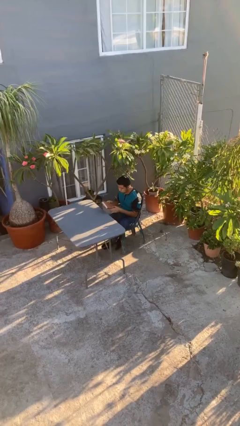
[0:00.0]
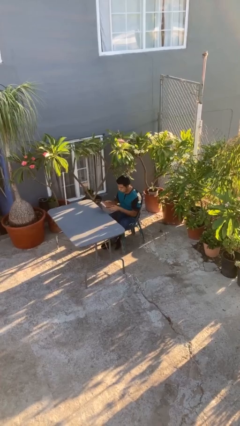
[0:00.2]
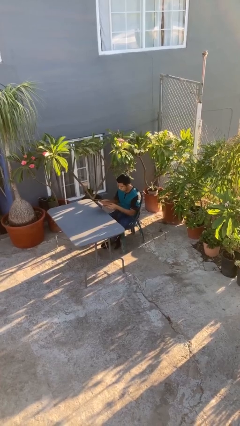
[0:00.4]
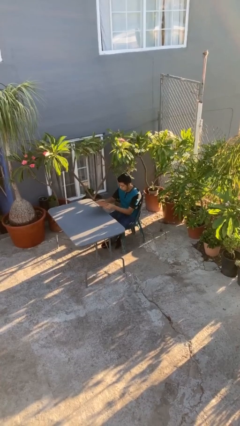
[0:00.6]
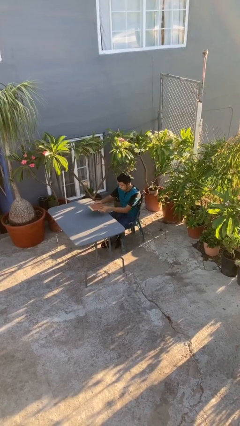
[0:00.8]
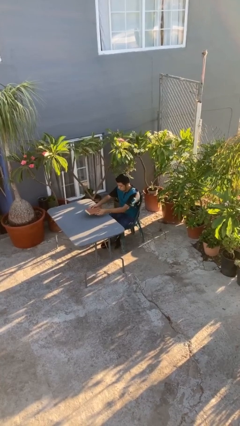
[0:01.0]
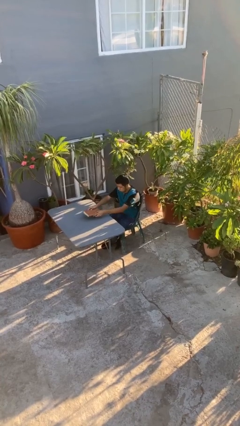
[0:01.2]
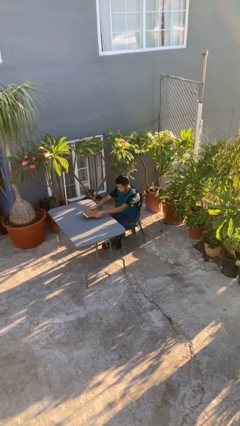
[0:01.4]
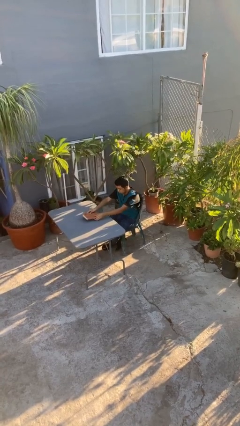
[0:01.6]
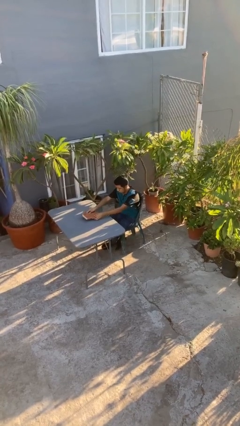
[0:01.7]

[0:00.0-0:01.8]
person puts down object on table

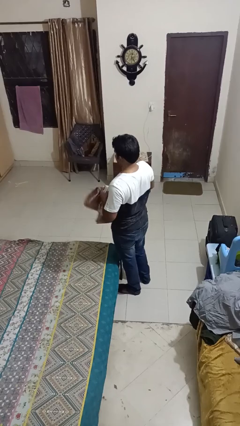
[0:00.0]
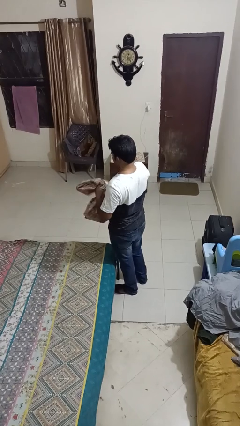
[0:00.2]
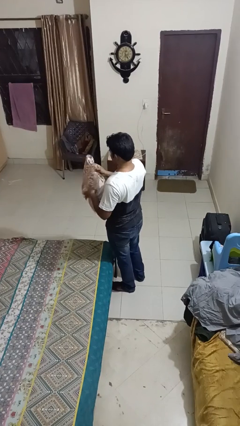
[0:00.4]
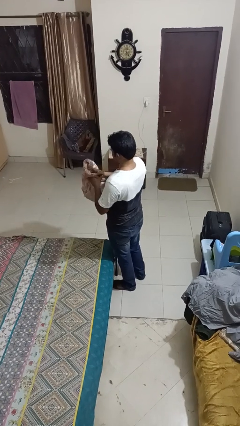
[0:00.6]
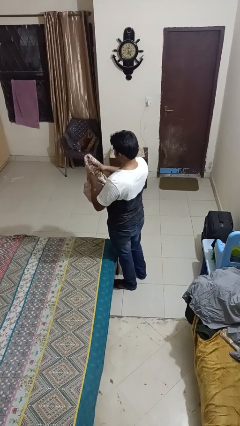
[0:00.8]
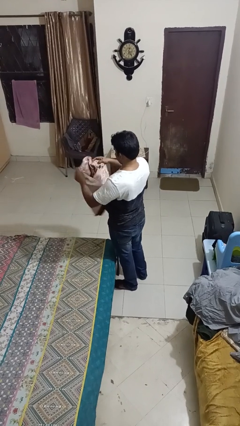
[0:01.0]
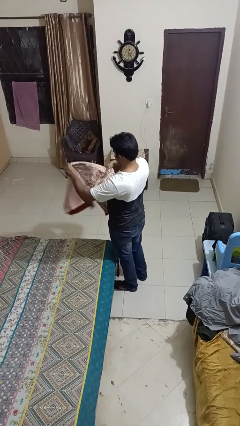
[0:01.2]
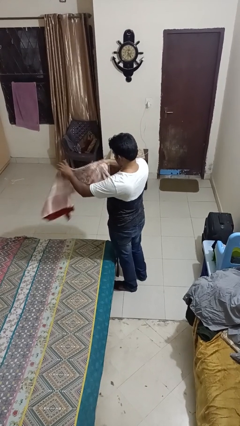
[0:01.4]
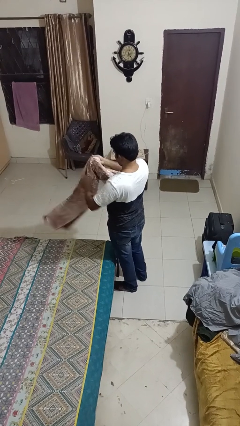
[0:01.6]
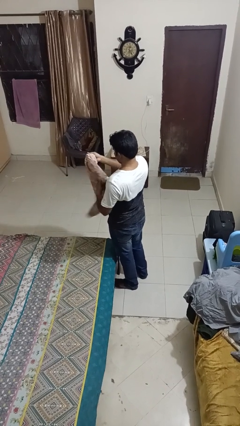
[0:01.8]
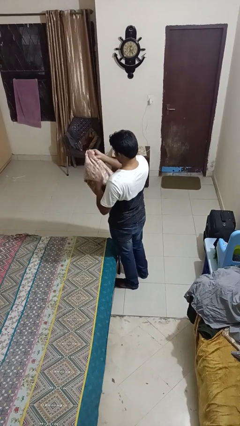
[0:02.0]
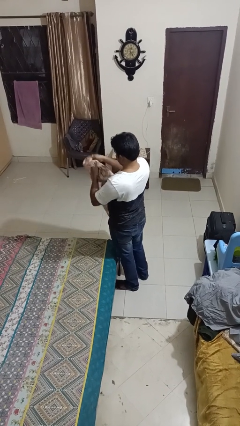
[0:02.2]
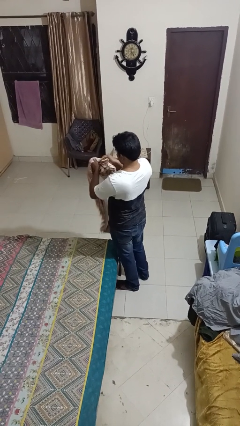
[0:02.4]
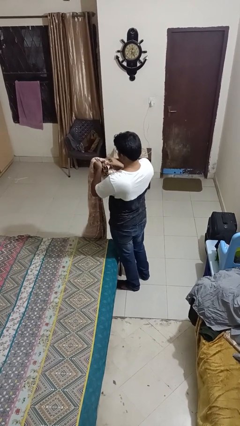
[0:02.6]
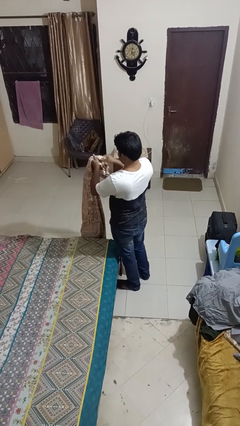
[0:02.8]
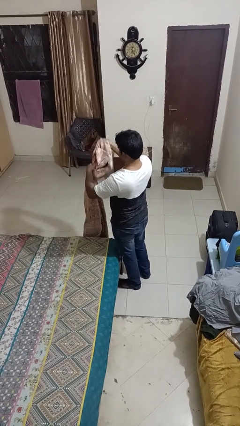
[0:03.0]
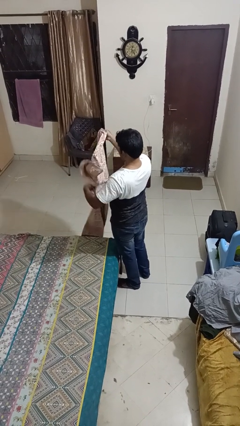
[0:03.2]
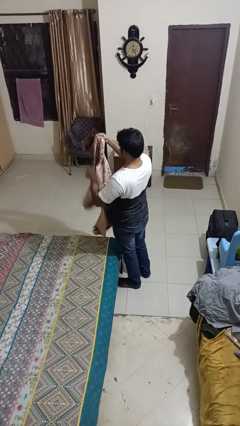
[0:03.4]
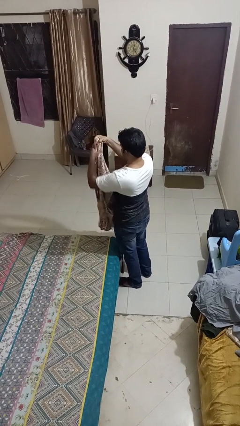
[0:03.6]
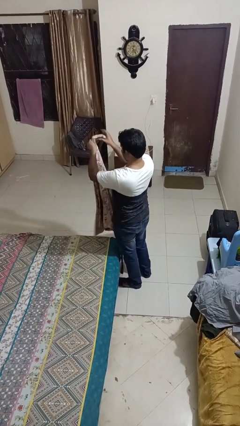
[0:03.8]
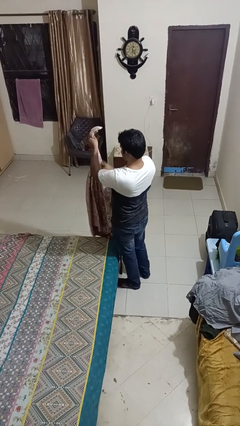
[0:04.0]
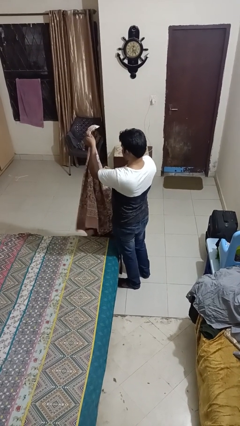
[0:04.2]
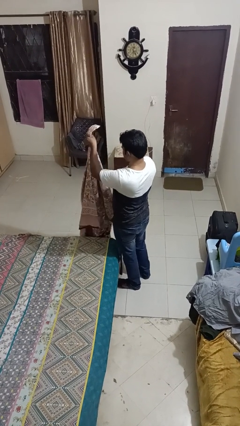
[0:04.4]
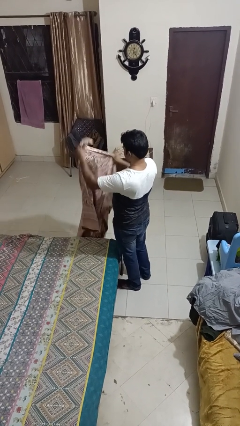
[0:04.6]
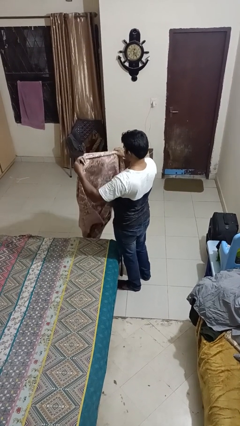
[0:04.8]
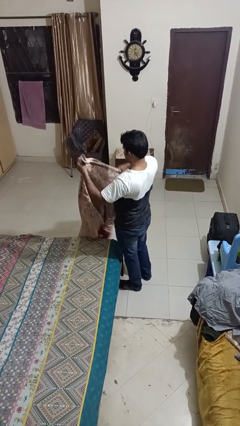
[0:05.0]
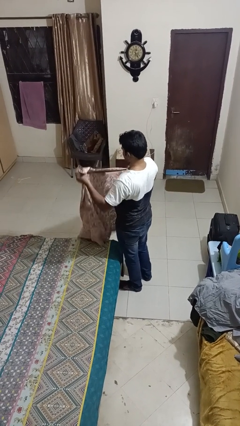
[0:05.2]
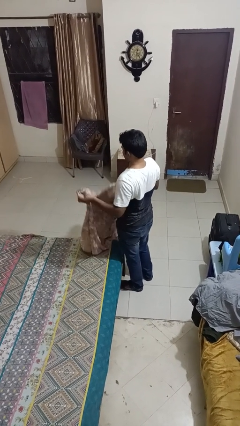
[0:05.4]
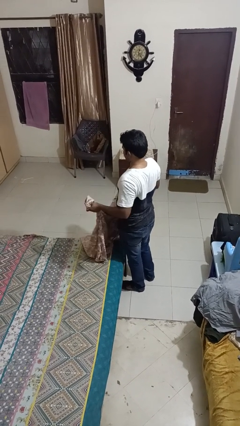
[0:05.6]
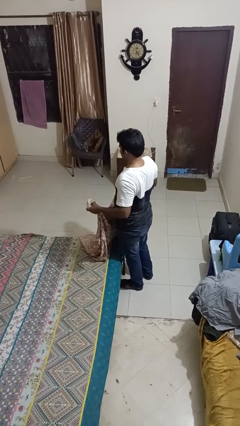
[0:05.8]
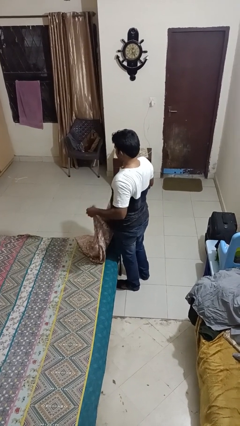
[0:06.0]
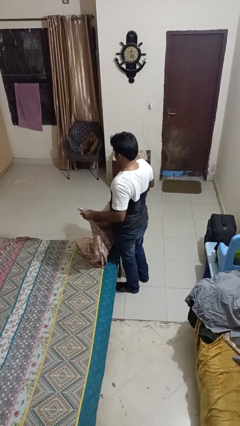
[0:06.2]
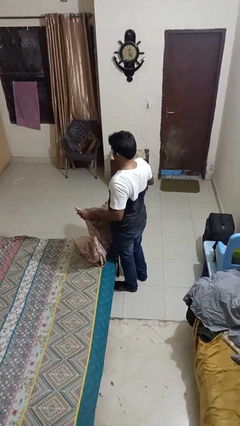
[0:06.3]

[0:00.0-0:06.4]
person unfolds blanket

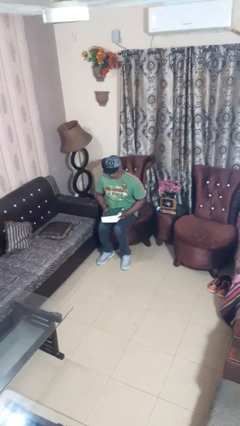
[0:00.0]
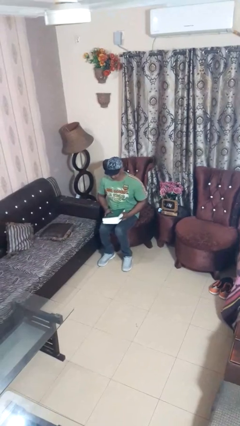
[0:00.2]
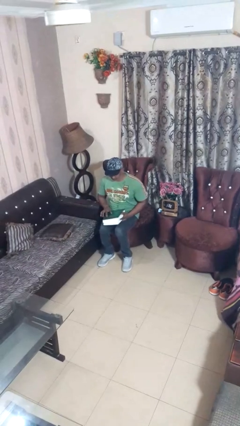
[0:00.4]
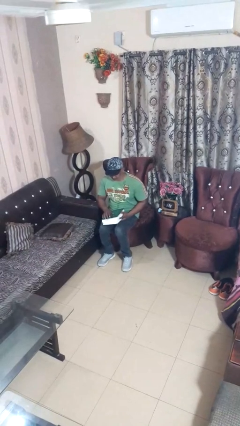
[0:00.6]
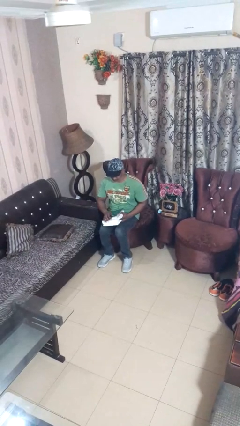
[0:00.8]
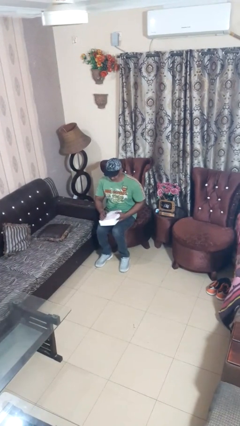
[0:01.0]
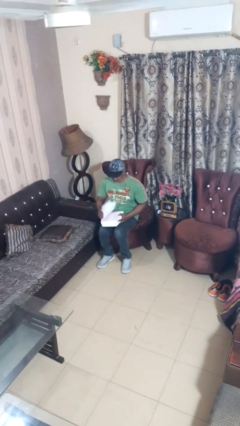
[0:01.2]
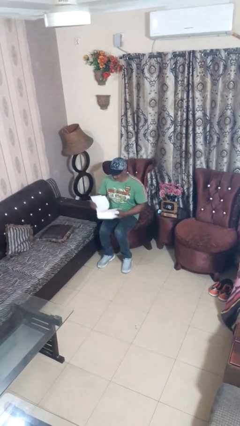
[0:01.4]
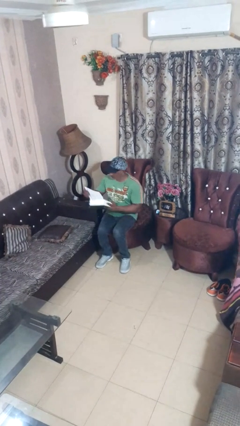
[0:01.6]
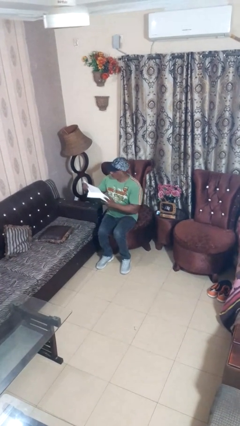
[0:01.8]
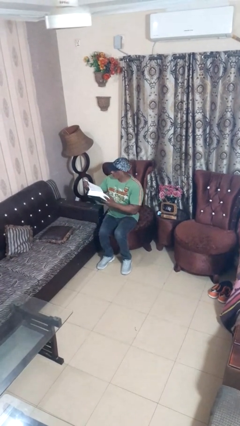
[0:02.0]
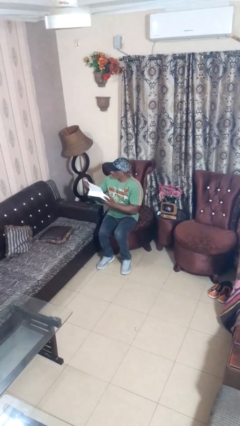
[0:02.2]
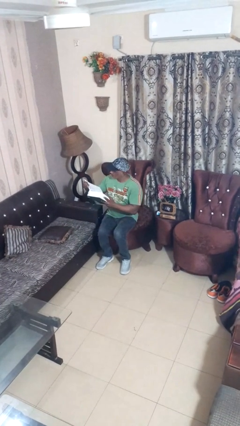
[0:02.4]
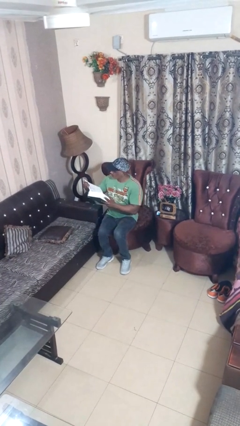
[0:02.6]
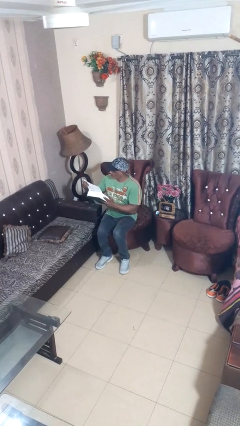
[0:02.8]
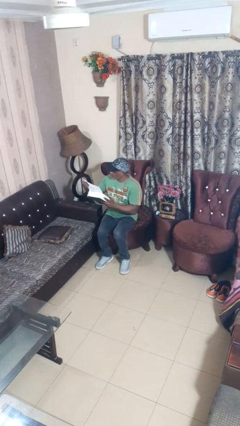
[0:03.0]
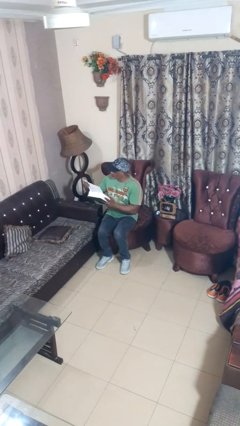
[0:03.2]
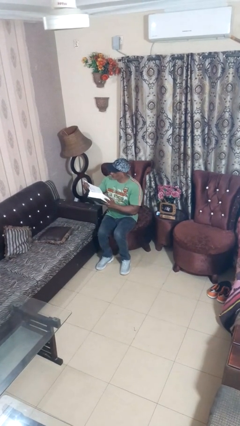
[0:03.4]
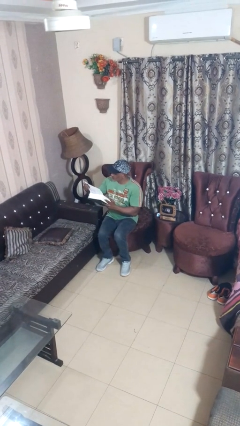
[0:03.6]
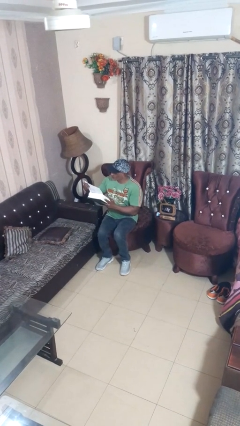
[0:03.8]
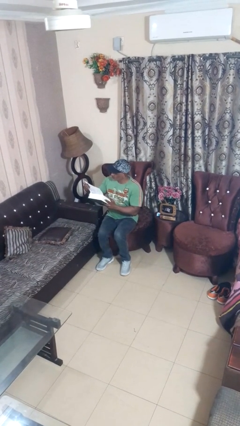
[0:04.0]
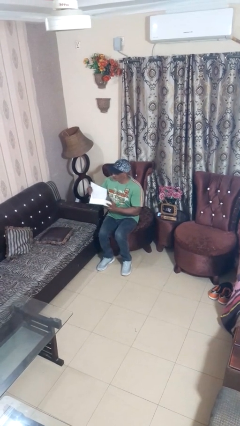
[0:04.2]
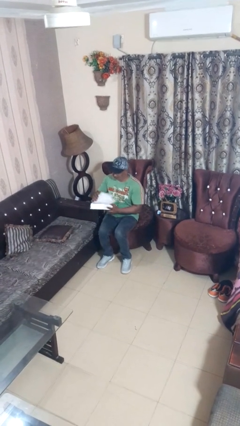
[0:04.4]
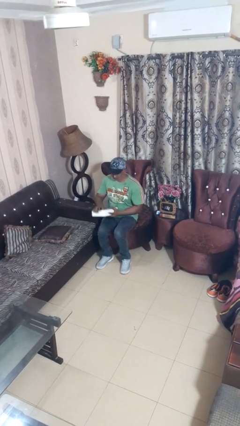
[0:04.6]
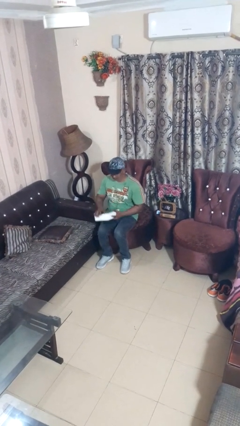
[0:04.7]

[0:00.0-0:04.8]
person reads book

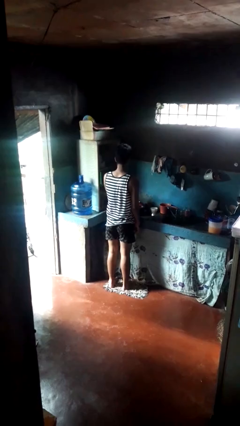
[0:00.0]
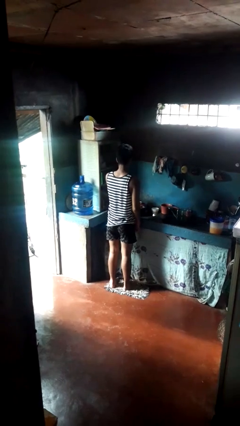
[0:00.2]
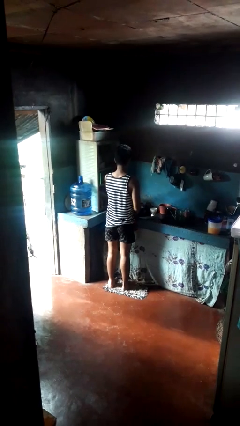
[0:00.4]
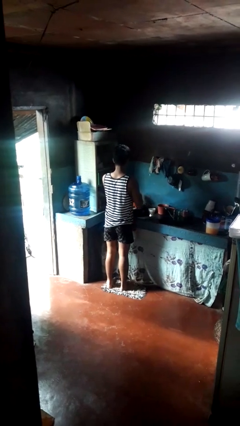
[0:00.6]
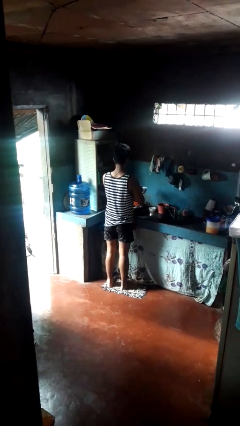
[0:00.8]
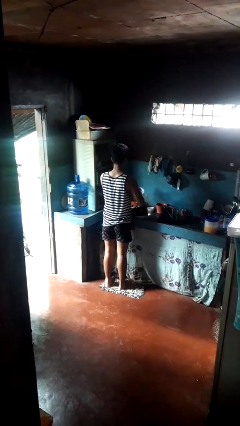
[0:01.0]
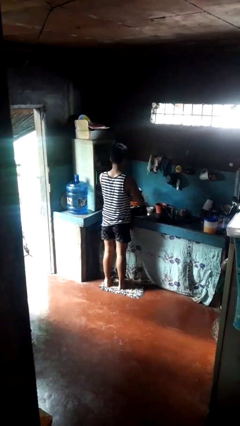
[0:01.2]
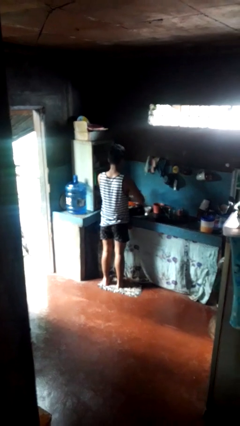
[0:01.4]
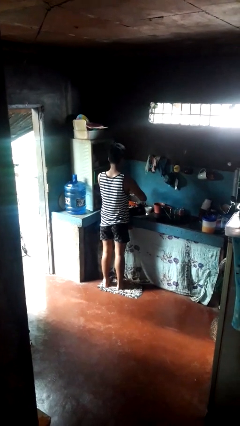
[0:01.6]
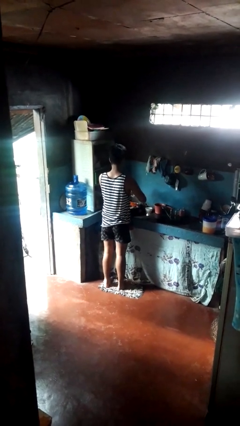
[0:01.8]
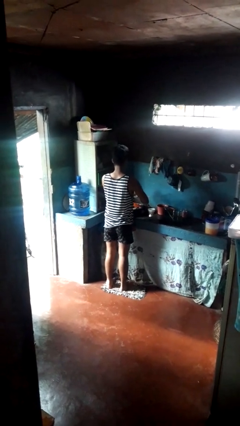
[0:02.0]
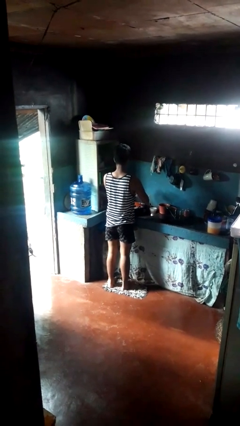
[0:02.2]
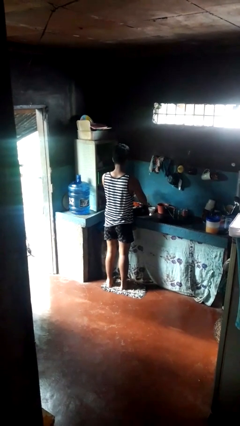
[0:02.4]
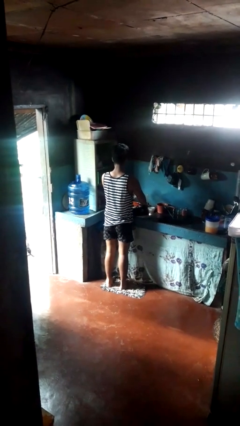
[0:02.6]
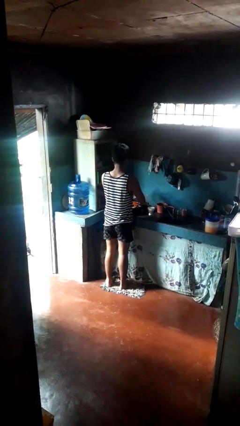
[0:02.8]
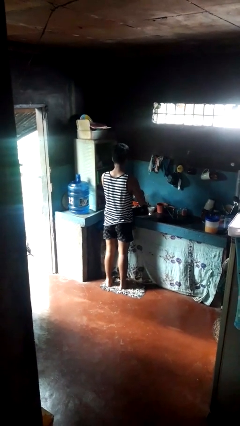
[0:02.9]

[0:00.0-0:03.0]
person washes dish

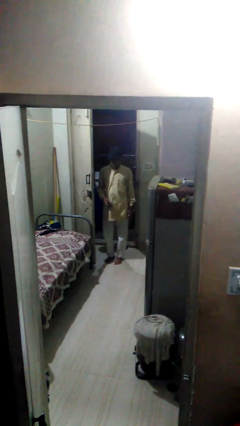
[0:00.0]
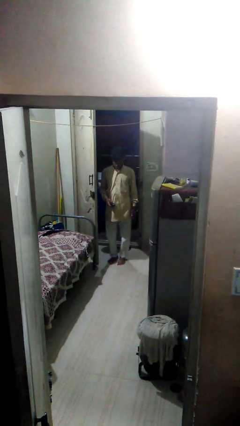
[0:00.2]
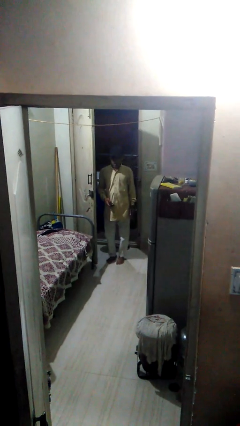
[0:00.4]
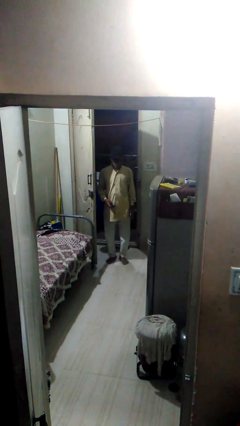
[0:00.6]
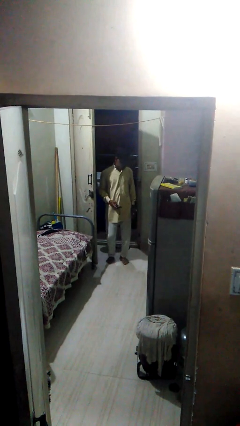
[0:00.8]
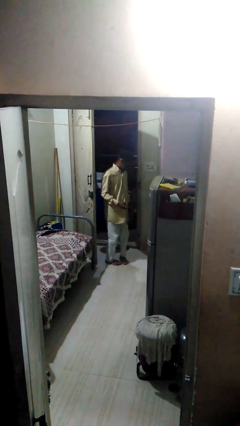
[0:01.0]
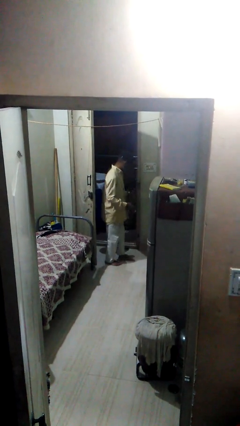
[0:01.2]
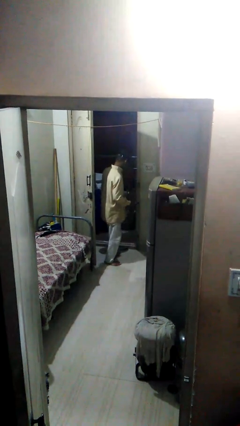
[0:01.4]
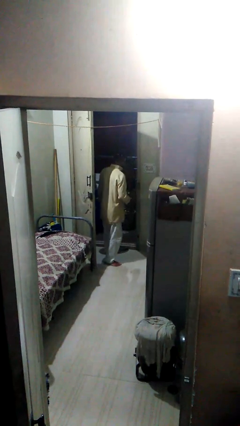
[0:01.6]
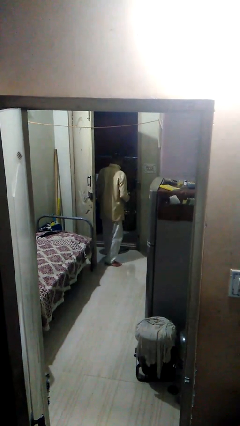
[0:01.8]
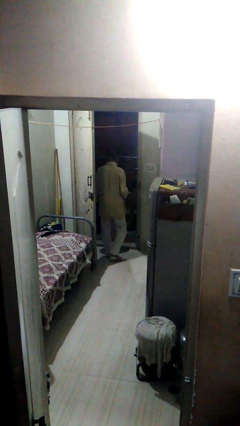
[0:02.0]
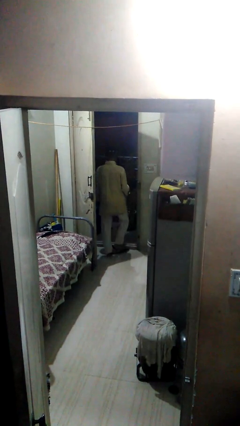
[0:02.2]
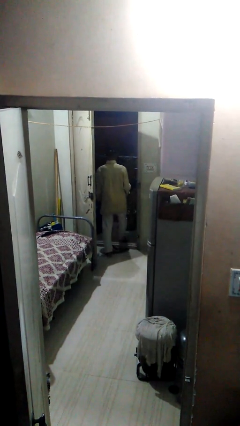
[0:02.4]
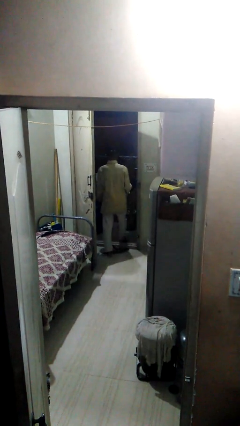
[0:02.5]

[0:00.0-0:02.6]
person exits scene through structure
